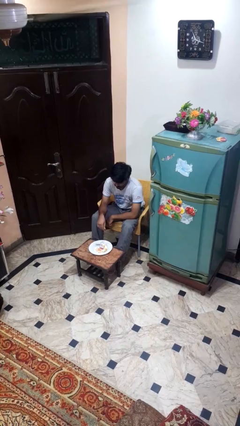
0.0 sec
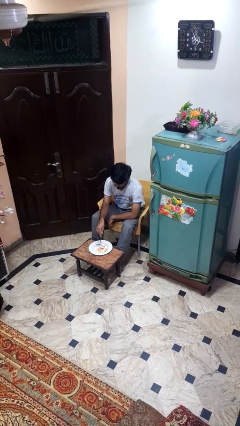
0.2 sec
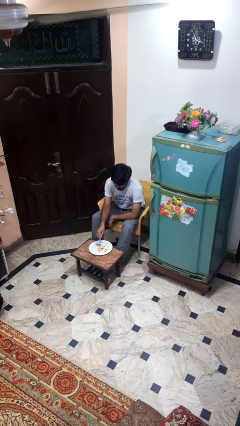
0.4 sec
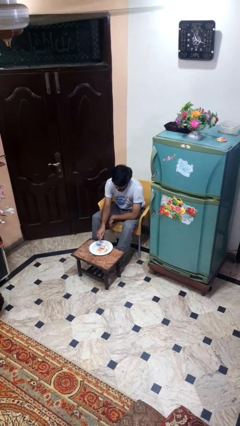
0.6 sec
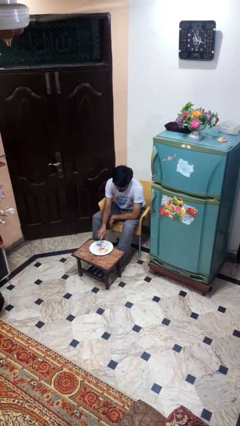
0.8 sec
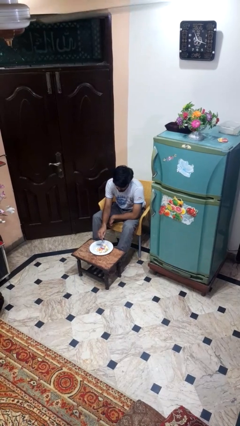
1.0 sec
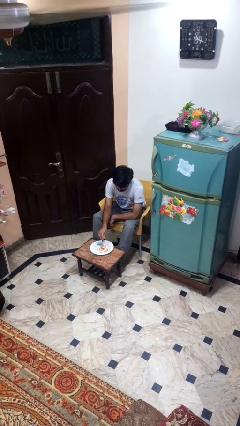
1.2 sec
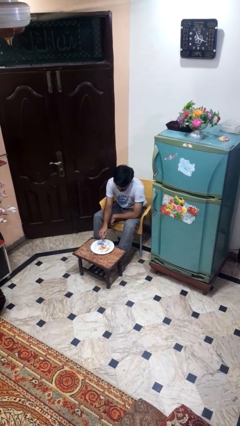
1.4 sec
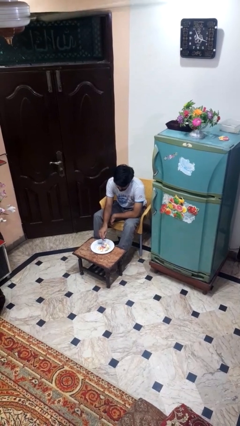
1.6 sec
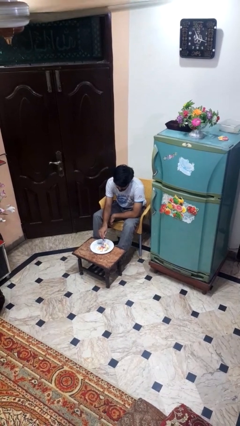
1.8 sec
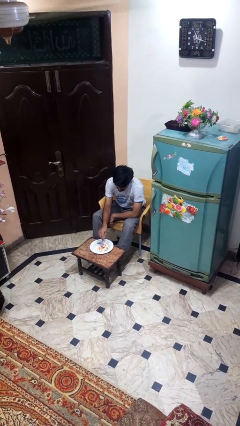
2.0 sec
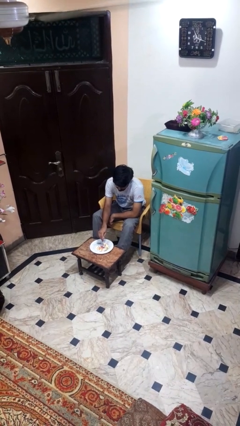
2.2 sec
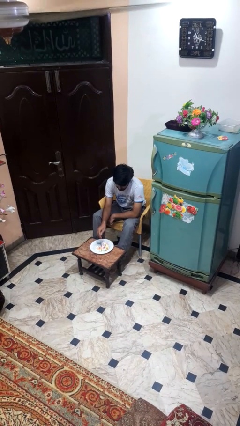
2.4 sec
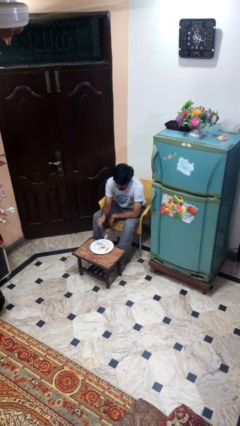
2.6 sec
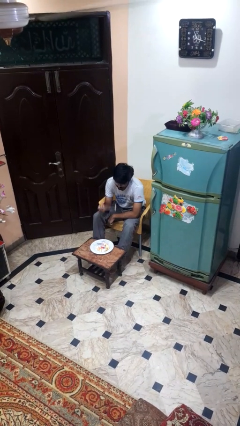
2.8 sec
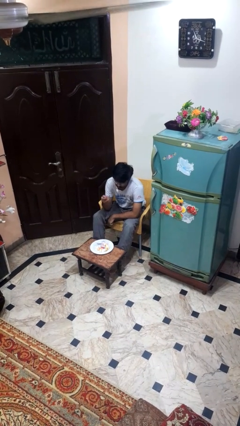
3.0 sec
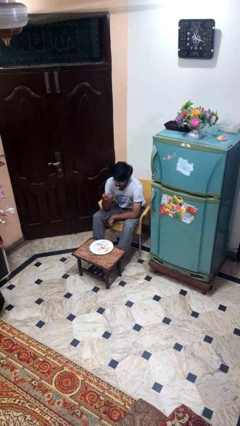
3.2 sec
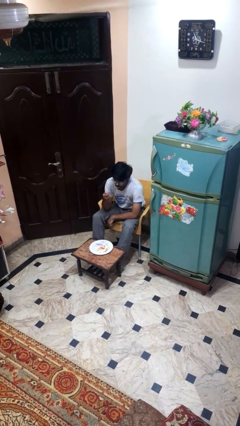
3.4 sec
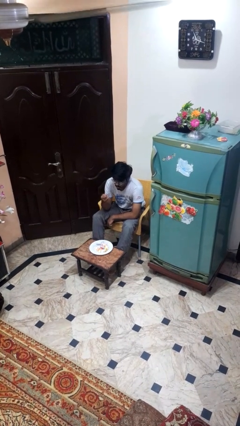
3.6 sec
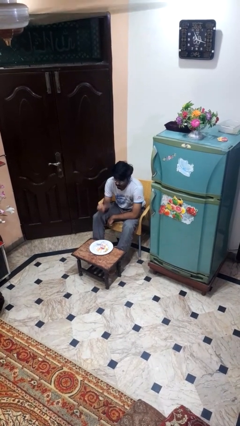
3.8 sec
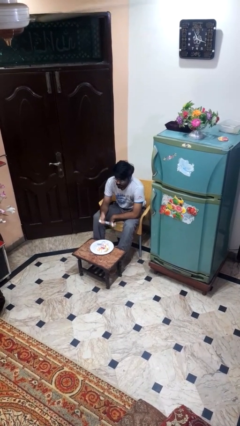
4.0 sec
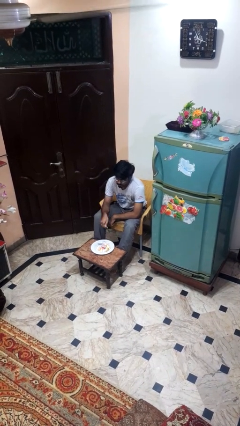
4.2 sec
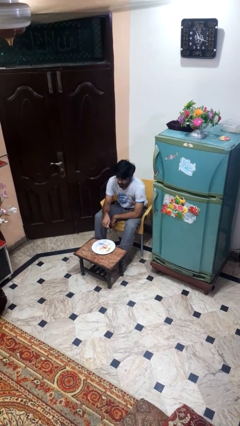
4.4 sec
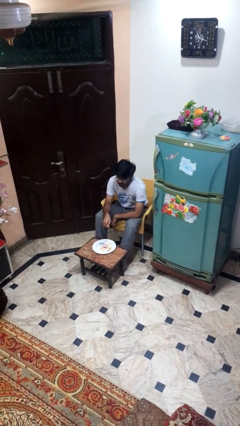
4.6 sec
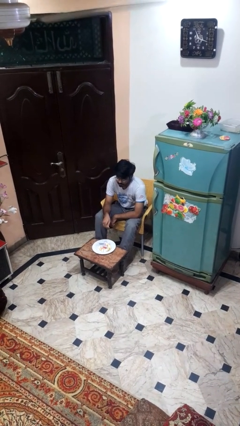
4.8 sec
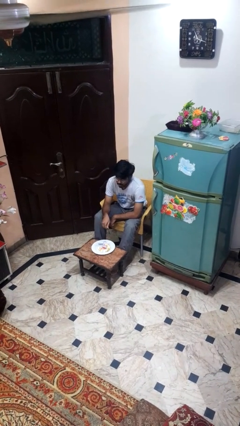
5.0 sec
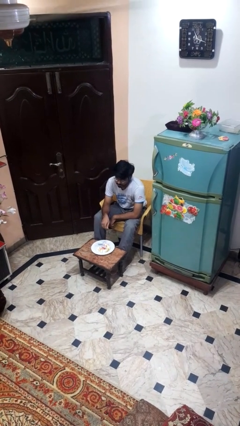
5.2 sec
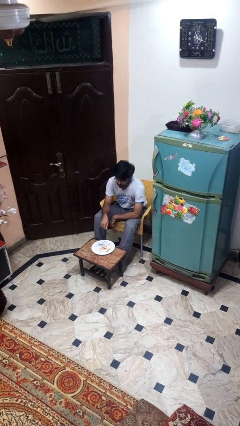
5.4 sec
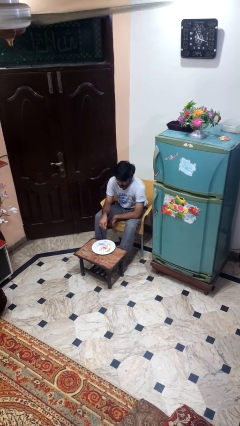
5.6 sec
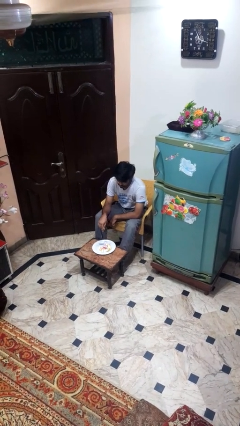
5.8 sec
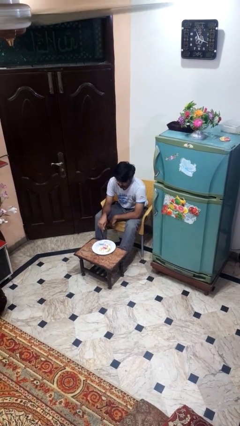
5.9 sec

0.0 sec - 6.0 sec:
person eats with utensil

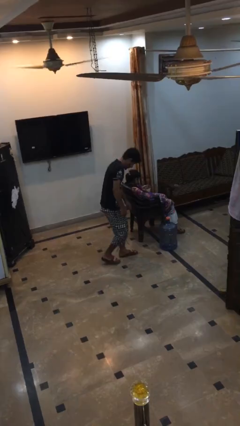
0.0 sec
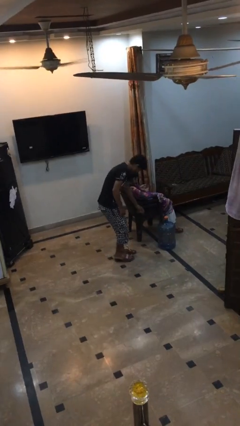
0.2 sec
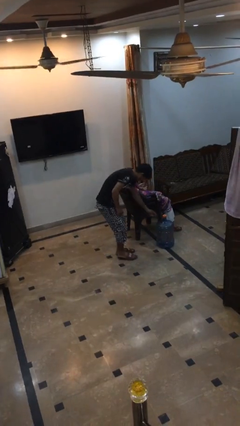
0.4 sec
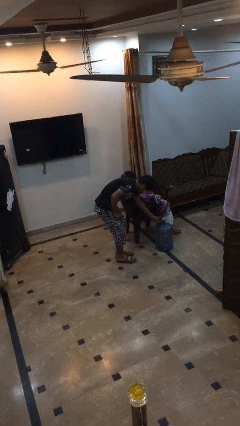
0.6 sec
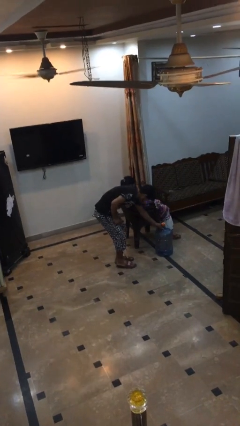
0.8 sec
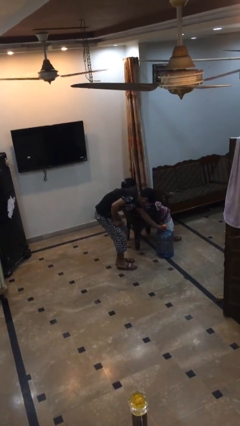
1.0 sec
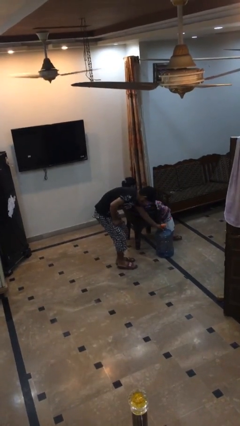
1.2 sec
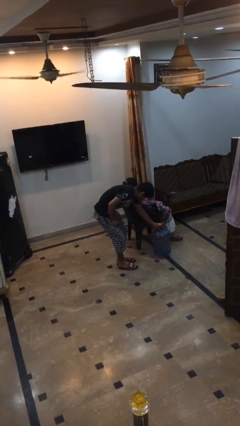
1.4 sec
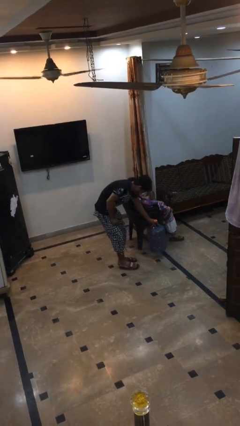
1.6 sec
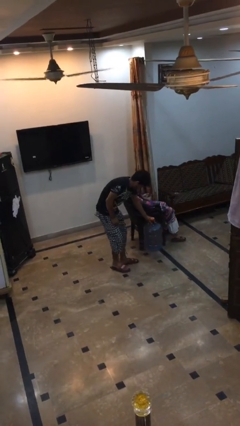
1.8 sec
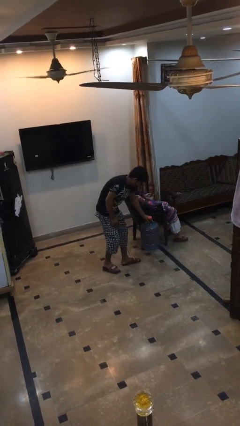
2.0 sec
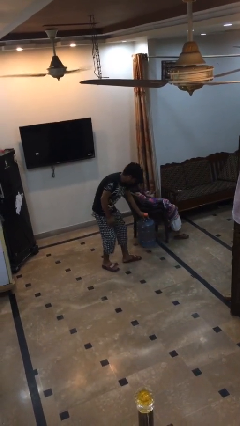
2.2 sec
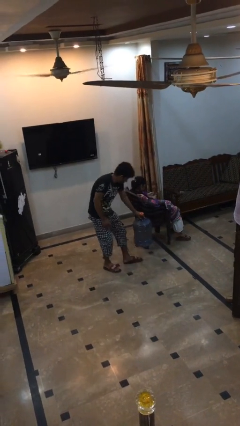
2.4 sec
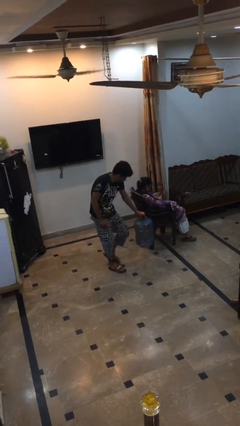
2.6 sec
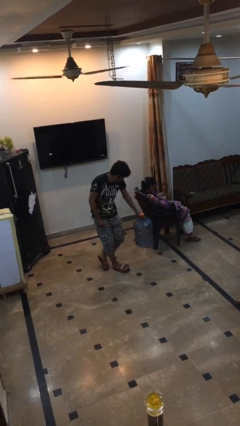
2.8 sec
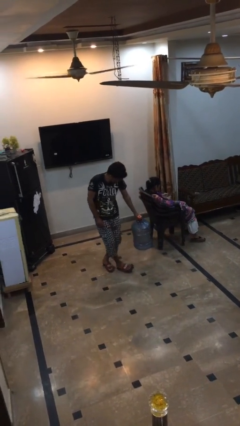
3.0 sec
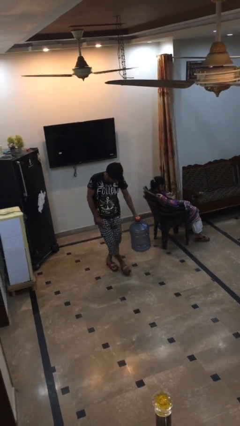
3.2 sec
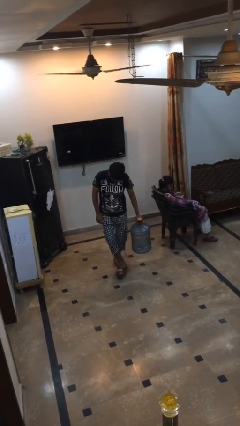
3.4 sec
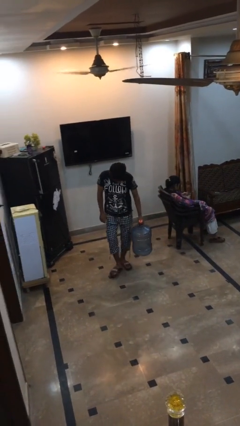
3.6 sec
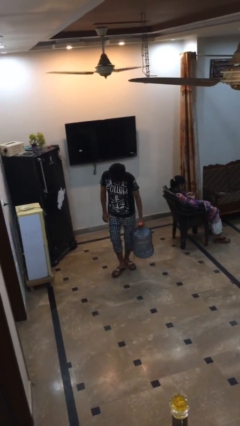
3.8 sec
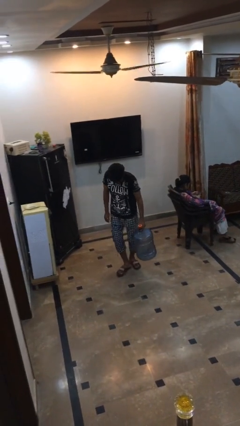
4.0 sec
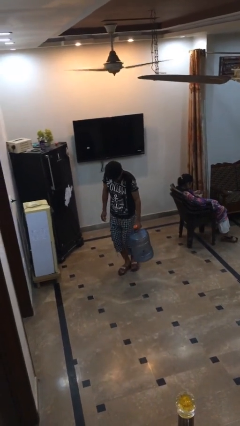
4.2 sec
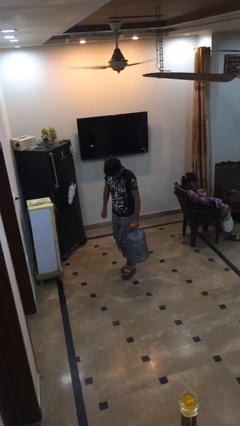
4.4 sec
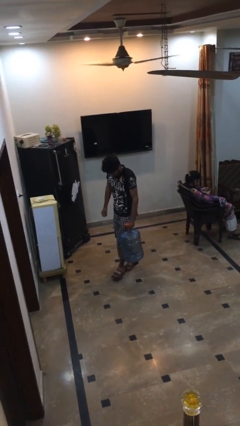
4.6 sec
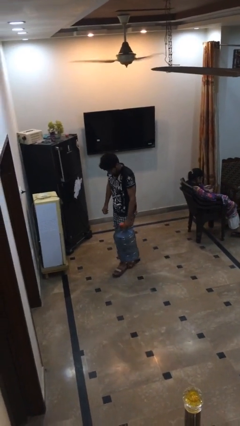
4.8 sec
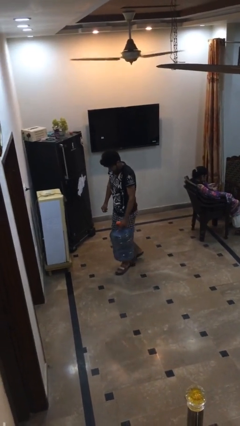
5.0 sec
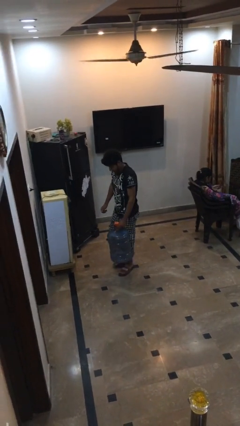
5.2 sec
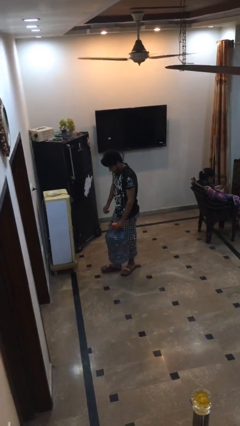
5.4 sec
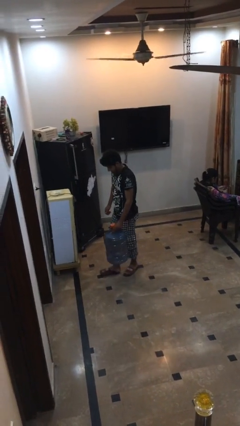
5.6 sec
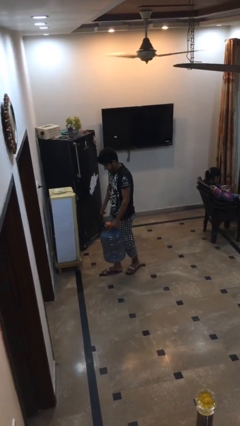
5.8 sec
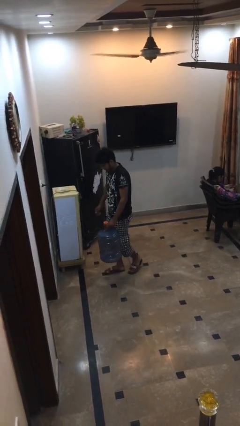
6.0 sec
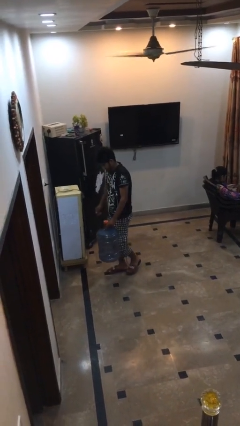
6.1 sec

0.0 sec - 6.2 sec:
person steals object from person

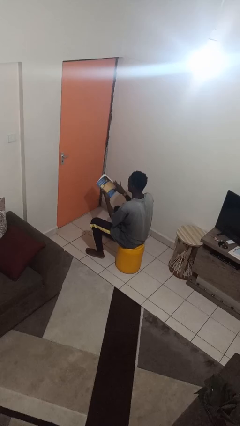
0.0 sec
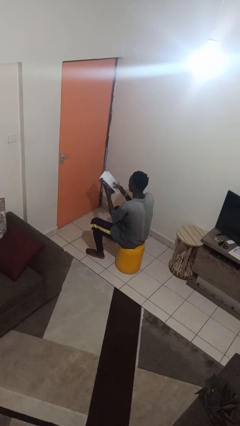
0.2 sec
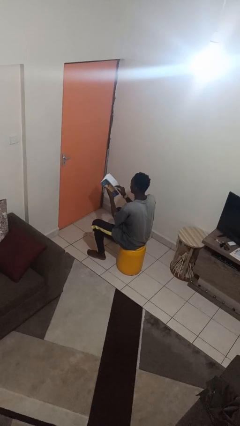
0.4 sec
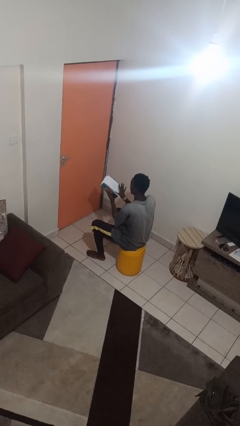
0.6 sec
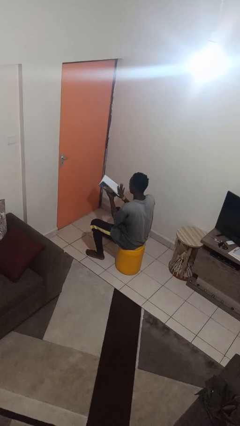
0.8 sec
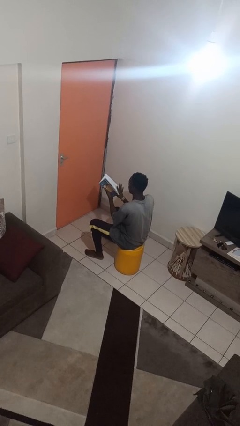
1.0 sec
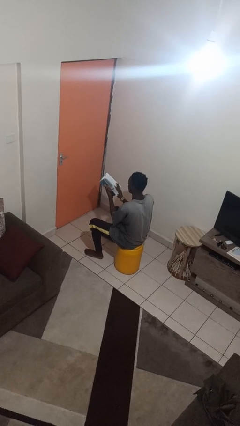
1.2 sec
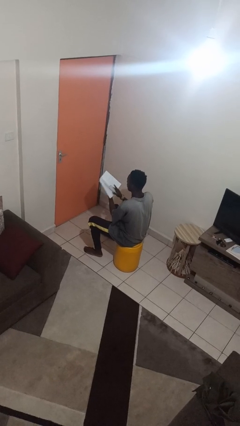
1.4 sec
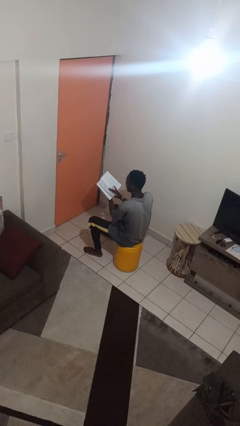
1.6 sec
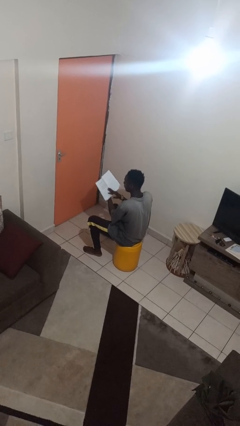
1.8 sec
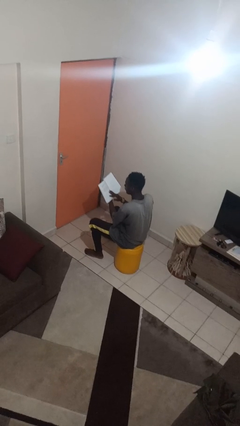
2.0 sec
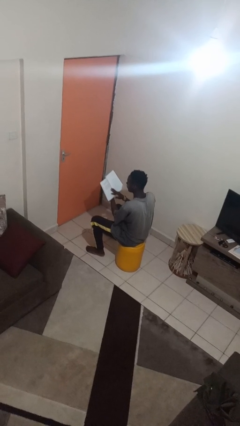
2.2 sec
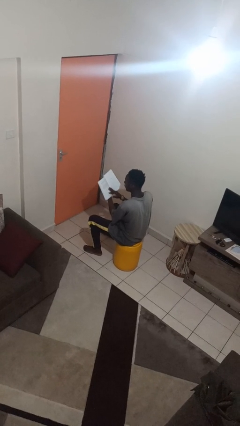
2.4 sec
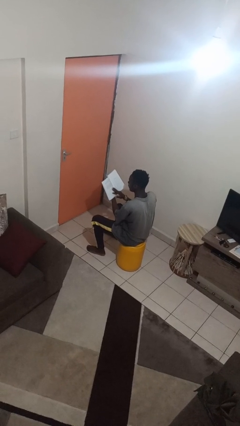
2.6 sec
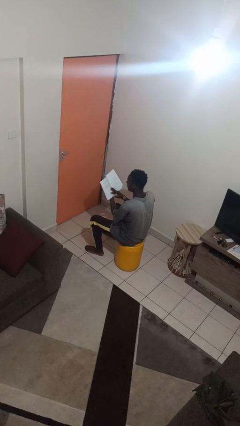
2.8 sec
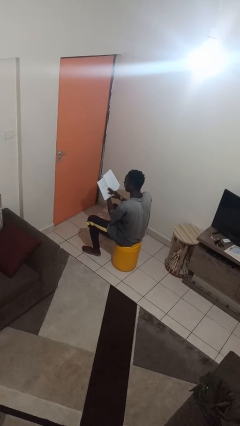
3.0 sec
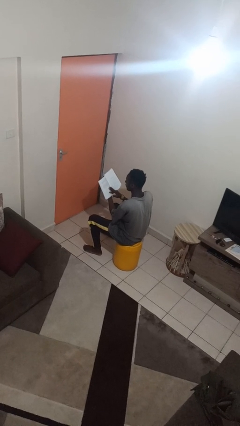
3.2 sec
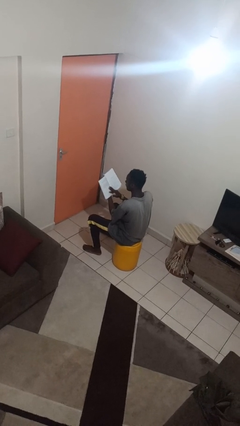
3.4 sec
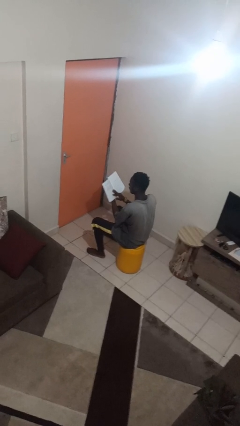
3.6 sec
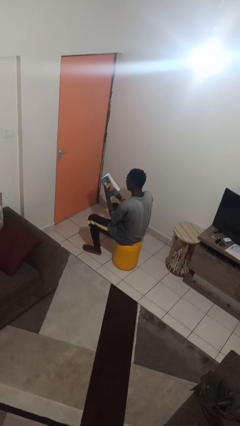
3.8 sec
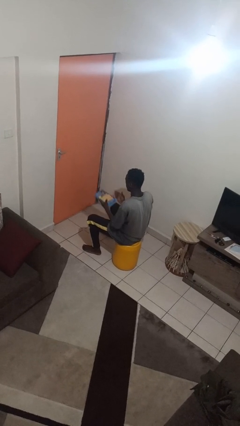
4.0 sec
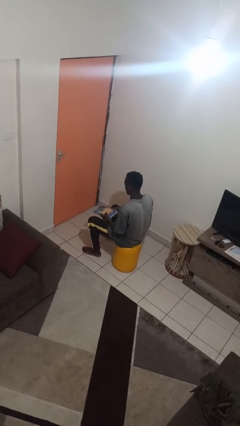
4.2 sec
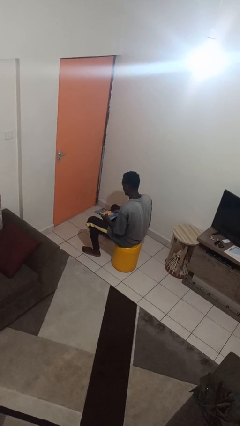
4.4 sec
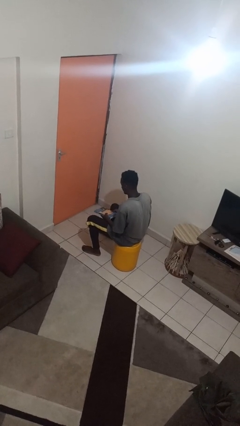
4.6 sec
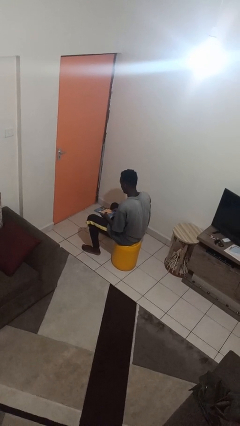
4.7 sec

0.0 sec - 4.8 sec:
person reads book

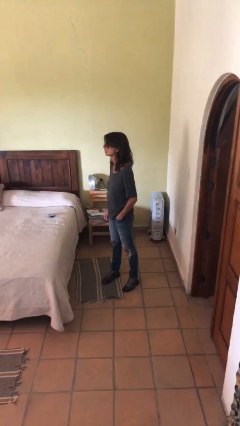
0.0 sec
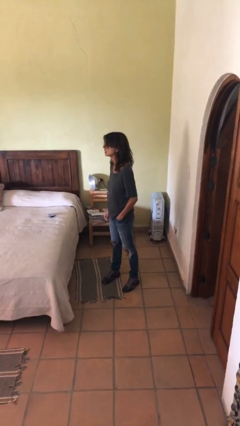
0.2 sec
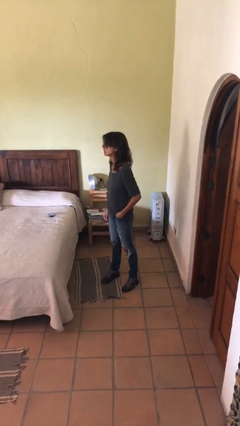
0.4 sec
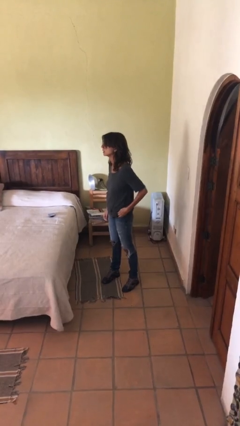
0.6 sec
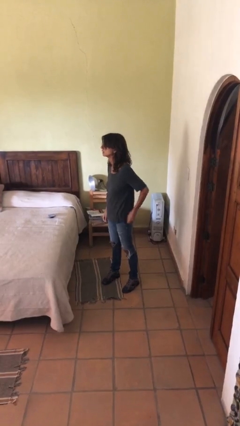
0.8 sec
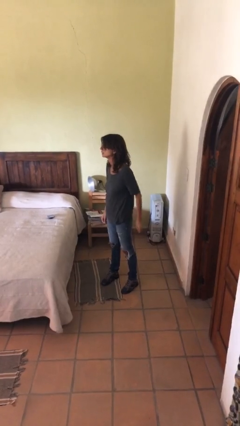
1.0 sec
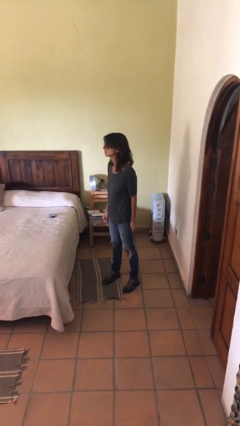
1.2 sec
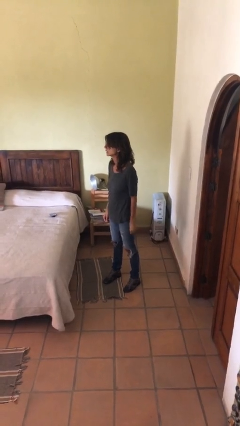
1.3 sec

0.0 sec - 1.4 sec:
person puts hands in back pockets
